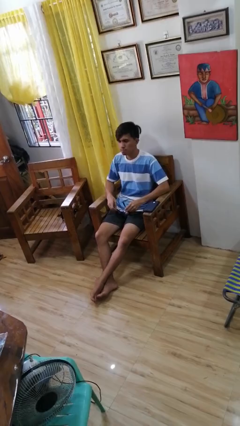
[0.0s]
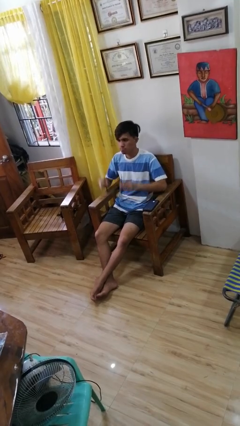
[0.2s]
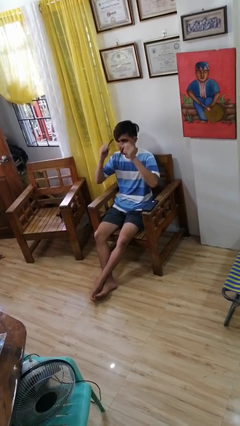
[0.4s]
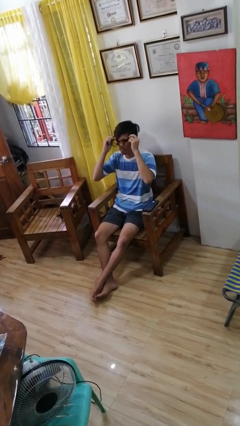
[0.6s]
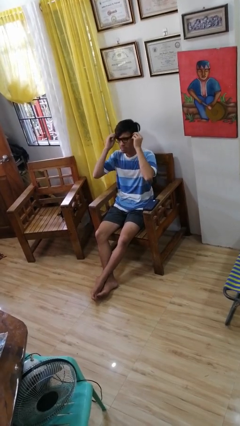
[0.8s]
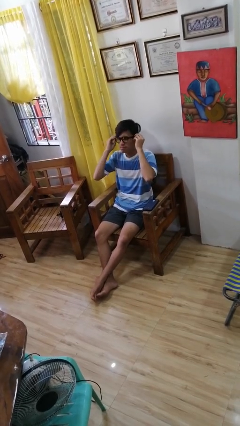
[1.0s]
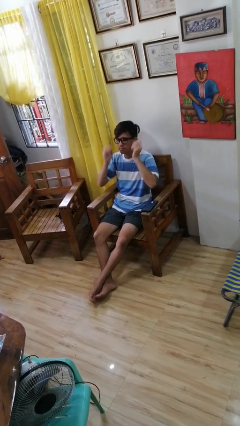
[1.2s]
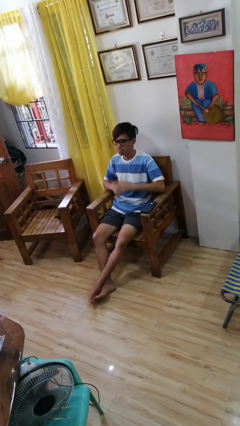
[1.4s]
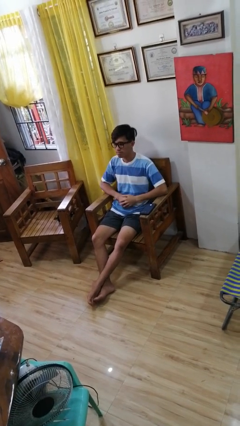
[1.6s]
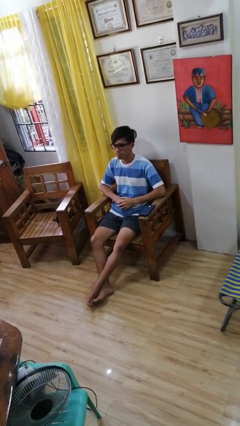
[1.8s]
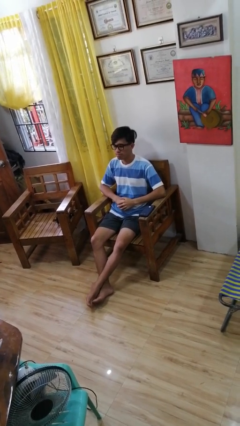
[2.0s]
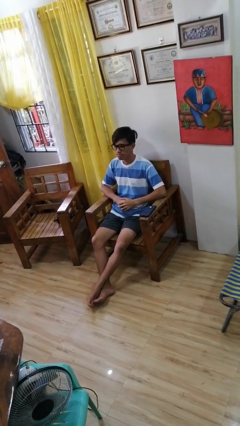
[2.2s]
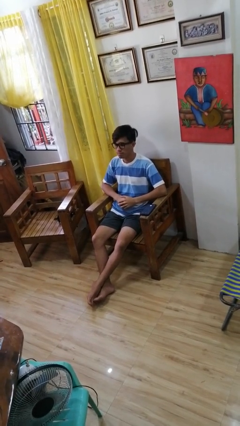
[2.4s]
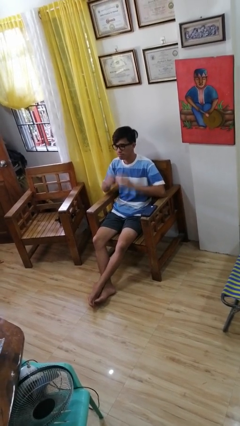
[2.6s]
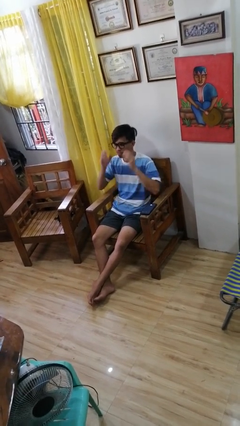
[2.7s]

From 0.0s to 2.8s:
person puts on glasses

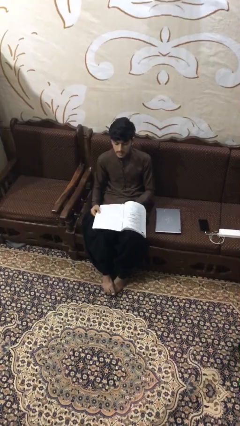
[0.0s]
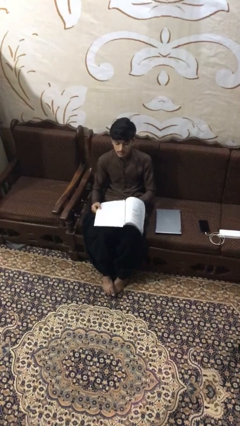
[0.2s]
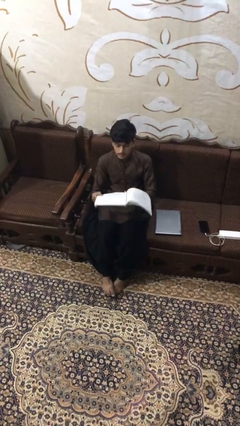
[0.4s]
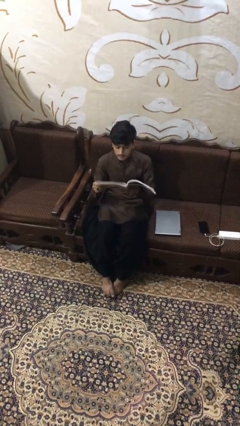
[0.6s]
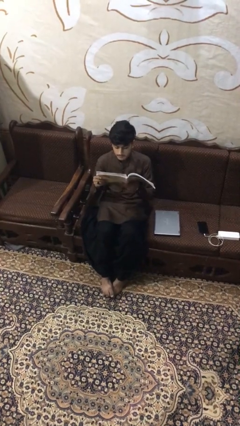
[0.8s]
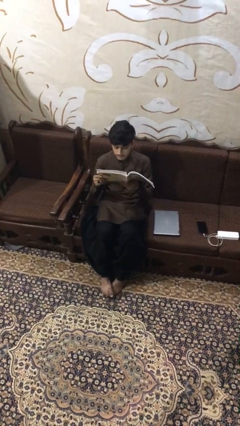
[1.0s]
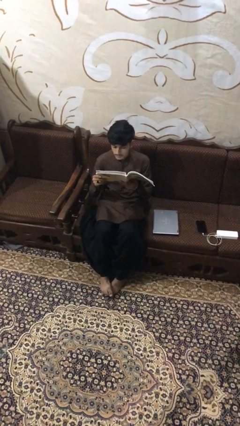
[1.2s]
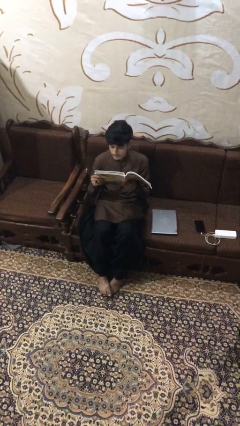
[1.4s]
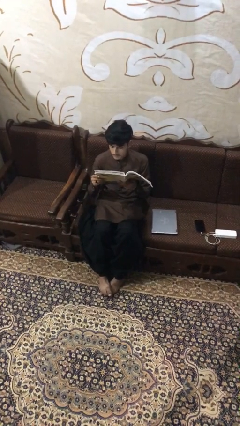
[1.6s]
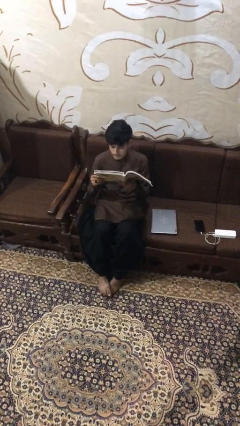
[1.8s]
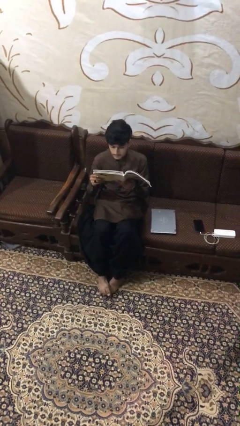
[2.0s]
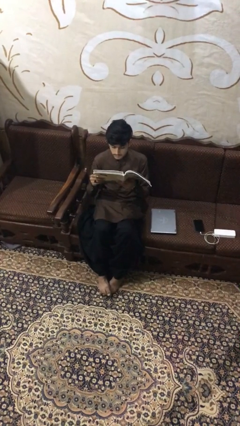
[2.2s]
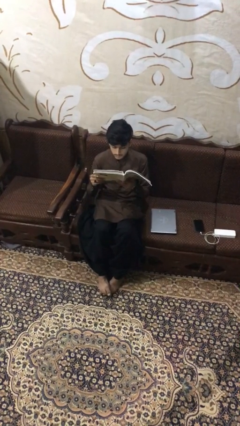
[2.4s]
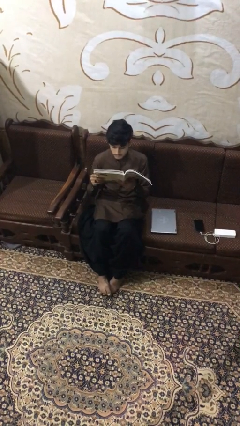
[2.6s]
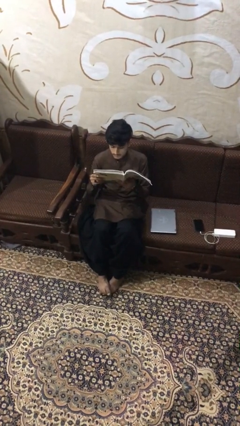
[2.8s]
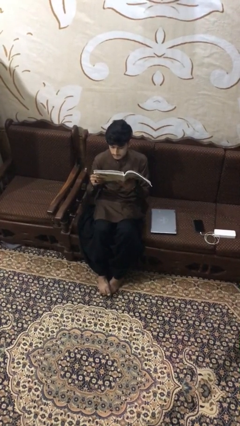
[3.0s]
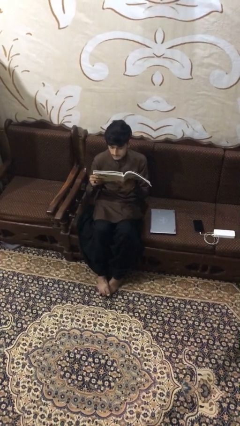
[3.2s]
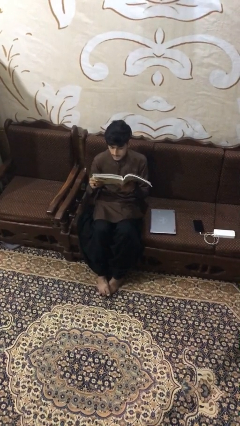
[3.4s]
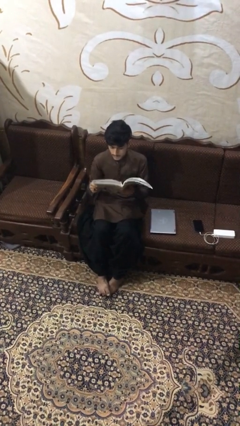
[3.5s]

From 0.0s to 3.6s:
person reads document

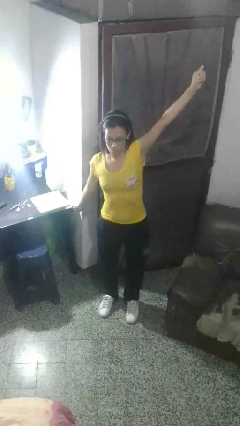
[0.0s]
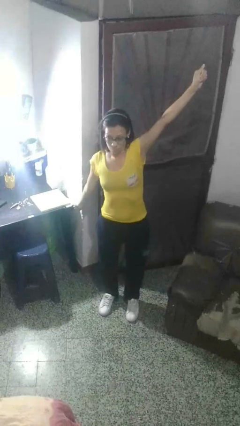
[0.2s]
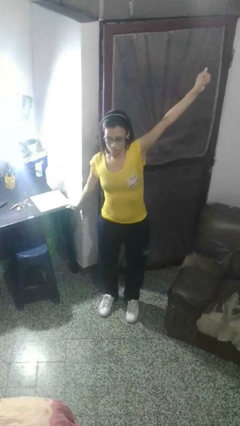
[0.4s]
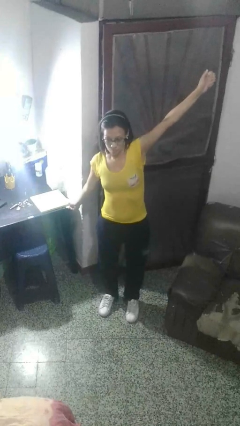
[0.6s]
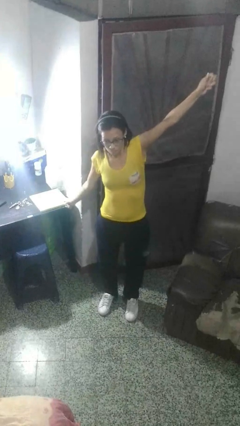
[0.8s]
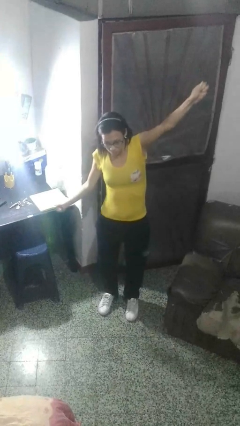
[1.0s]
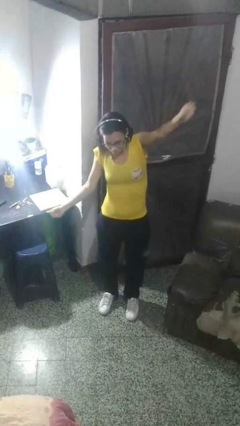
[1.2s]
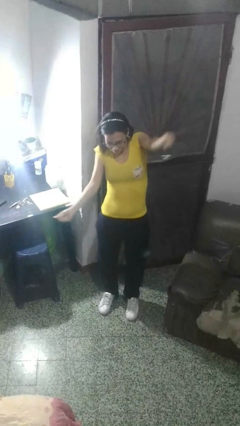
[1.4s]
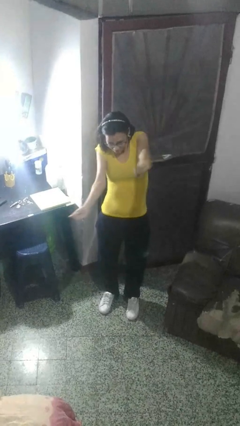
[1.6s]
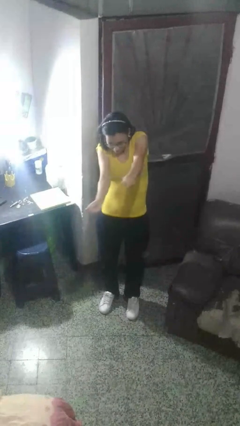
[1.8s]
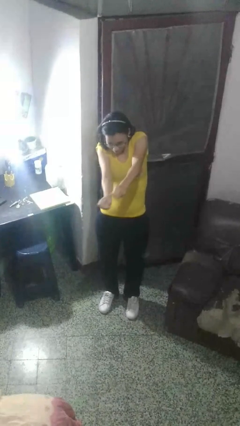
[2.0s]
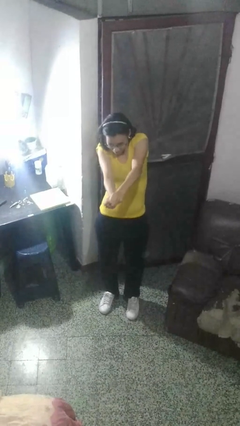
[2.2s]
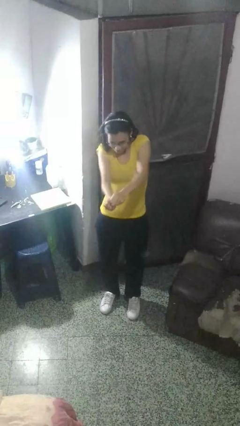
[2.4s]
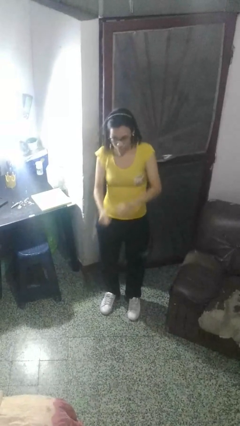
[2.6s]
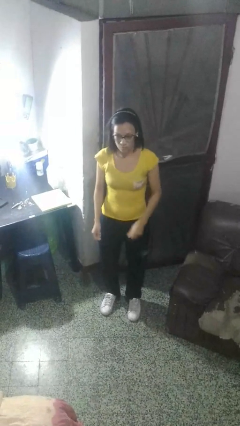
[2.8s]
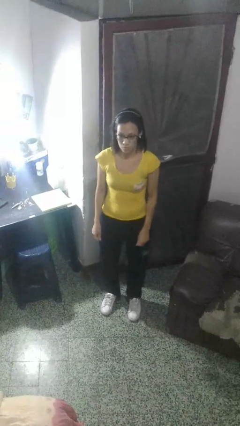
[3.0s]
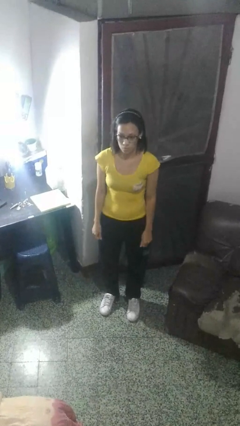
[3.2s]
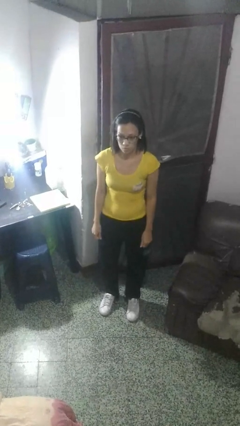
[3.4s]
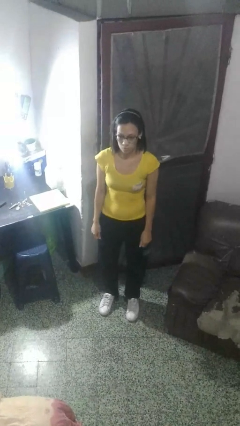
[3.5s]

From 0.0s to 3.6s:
person gestures zoom out

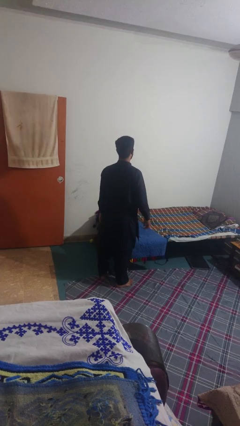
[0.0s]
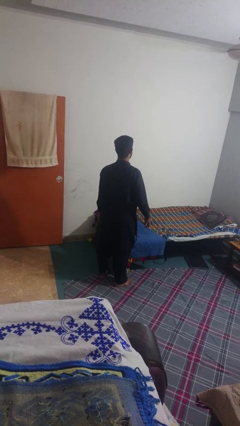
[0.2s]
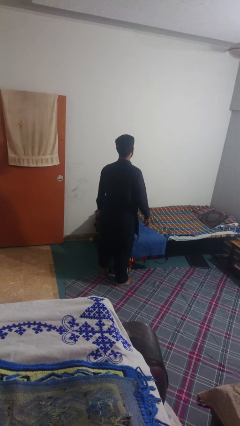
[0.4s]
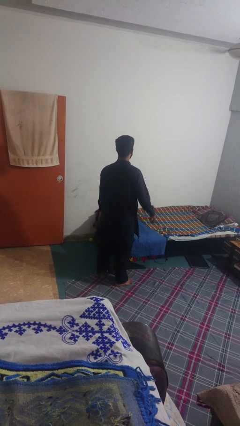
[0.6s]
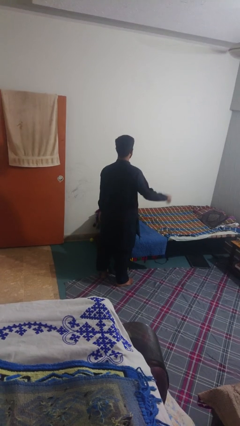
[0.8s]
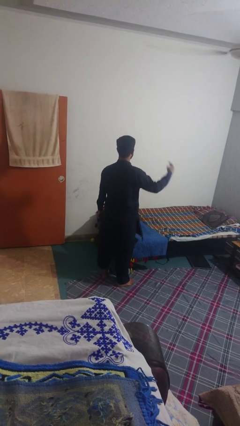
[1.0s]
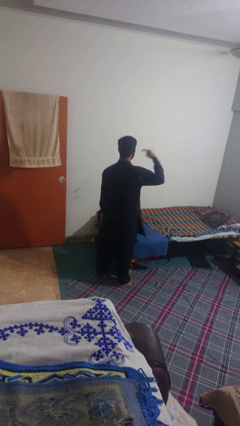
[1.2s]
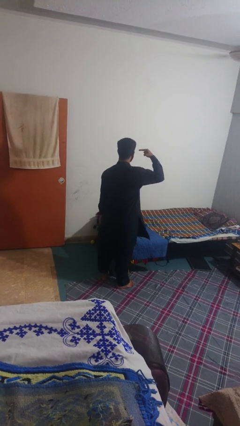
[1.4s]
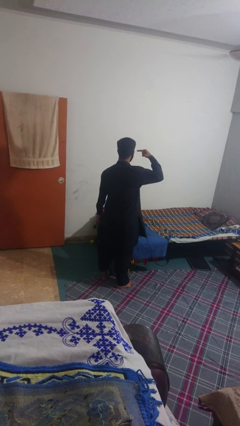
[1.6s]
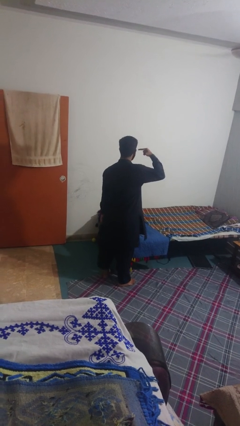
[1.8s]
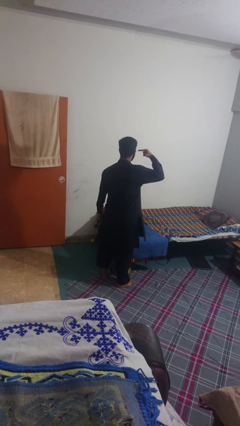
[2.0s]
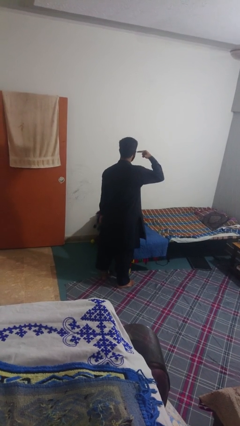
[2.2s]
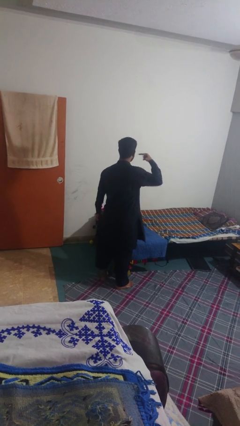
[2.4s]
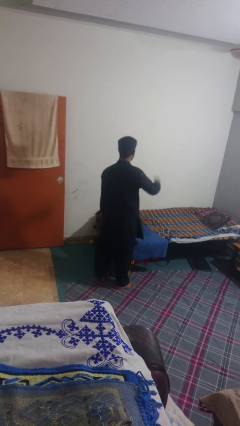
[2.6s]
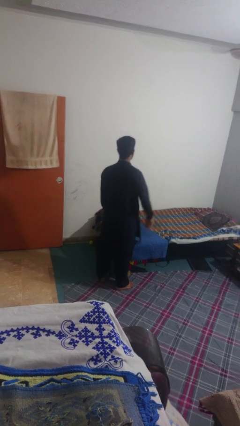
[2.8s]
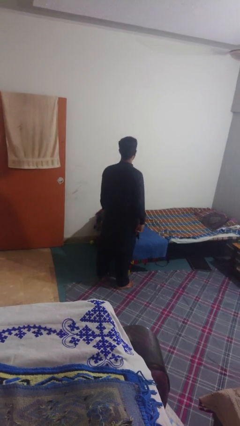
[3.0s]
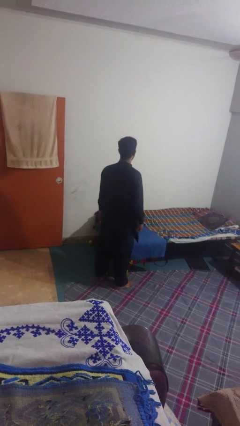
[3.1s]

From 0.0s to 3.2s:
person gestures listen closely

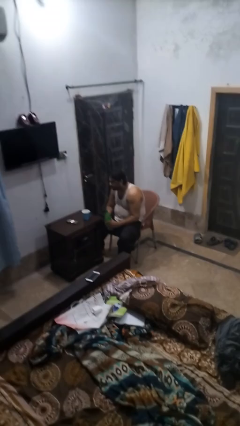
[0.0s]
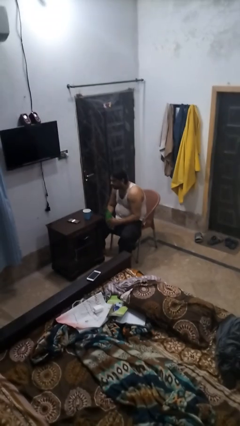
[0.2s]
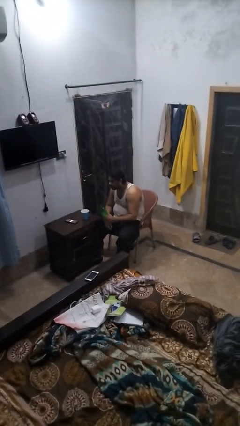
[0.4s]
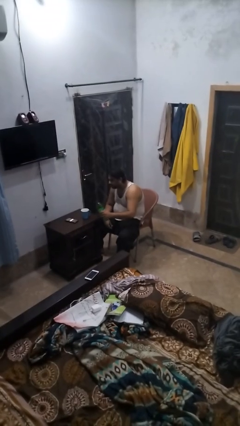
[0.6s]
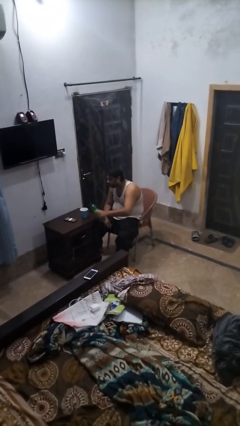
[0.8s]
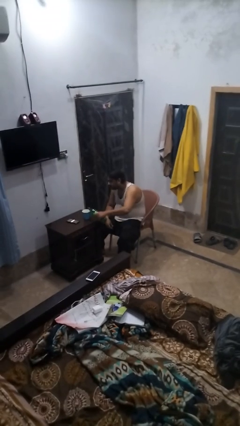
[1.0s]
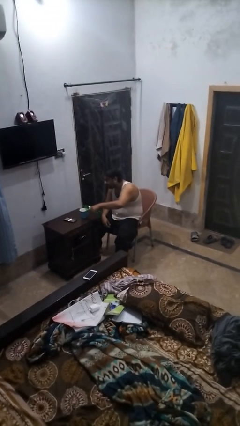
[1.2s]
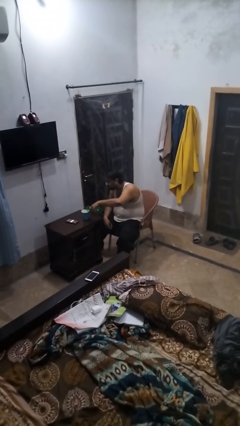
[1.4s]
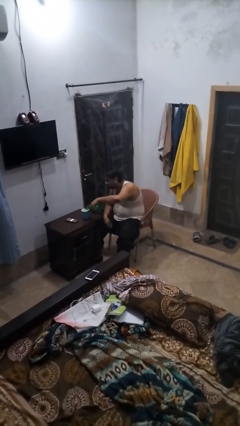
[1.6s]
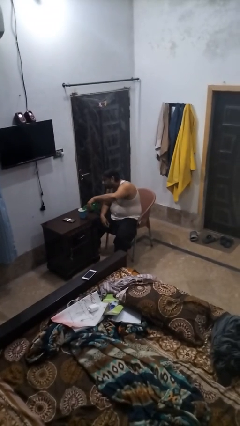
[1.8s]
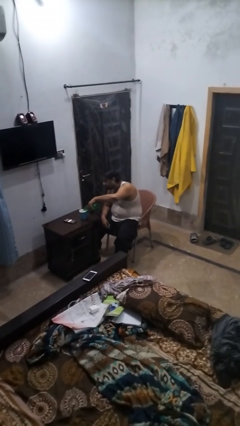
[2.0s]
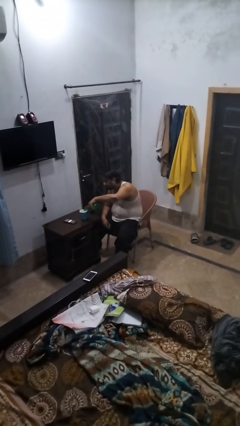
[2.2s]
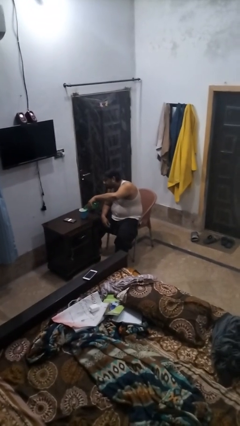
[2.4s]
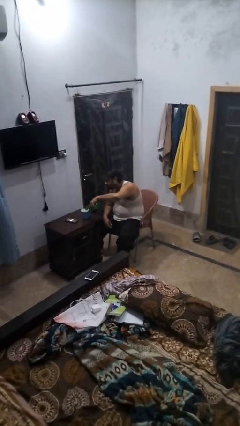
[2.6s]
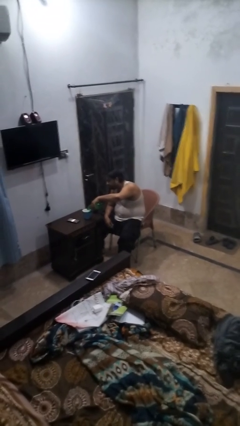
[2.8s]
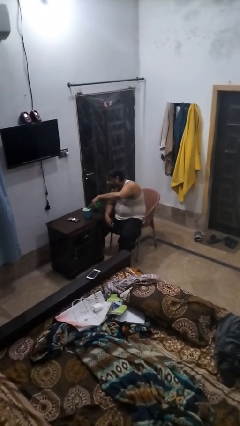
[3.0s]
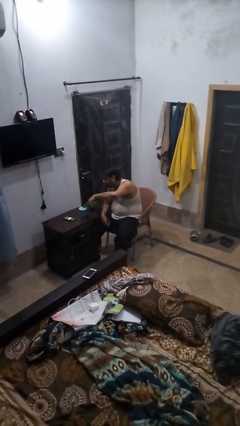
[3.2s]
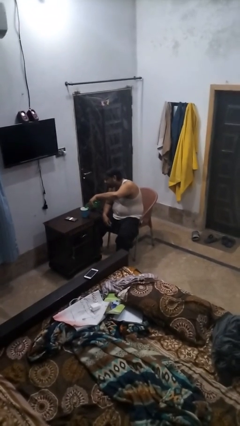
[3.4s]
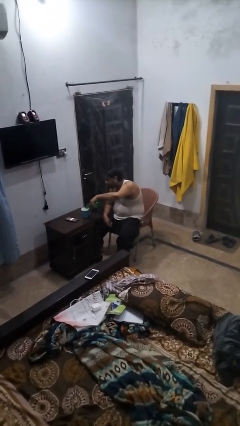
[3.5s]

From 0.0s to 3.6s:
person pours liquid into cup

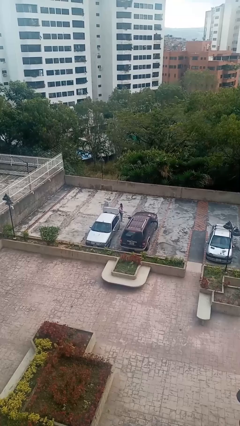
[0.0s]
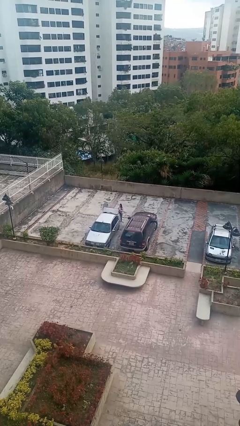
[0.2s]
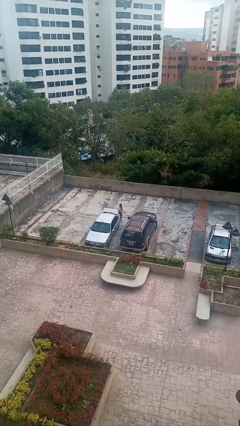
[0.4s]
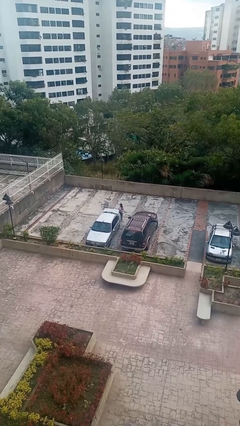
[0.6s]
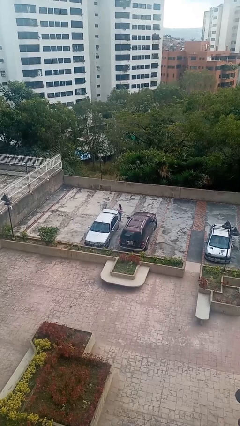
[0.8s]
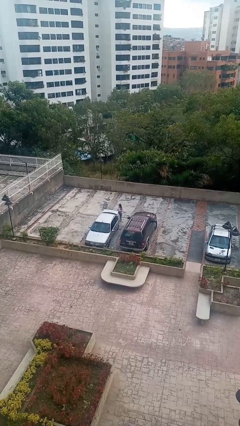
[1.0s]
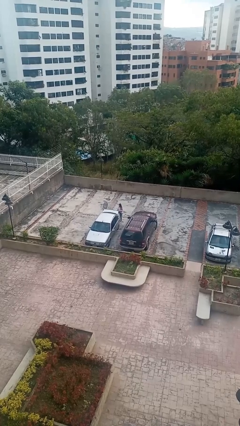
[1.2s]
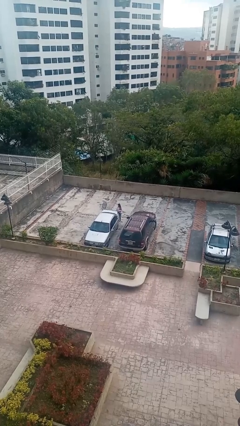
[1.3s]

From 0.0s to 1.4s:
person closes car trunk
